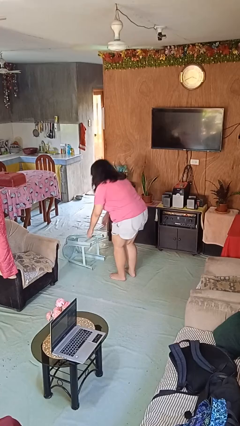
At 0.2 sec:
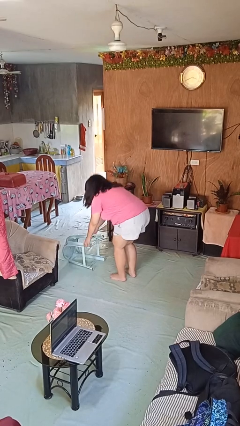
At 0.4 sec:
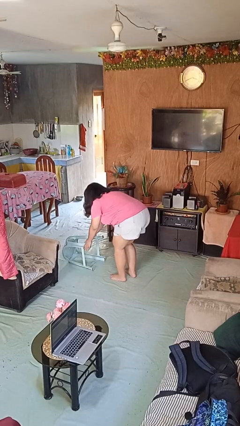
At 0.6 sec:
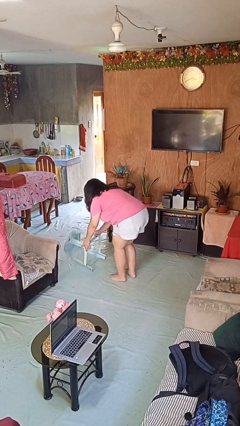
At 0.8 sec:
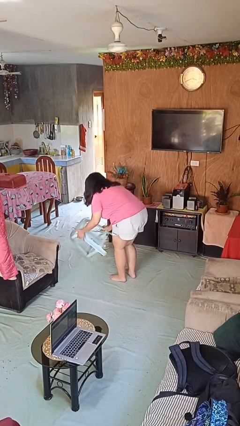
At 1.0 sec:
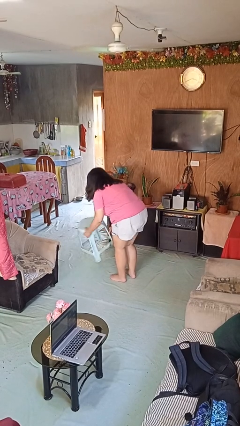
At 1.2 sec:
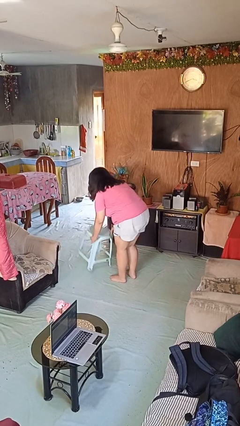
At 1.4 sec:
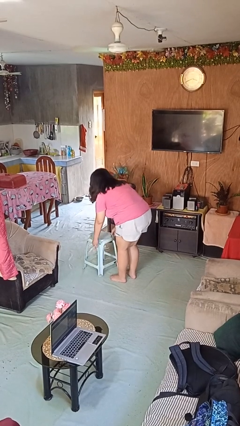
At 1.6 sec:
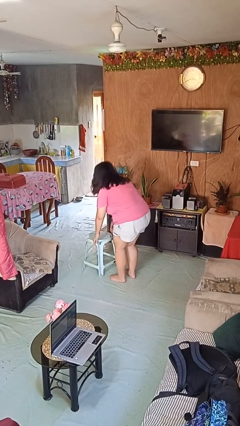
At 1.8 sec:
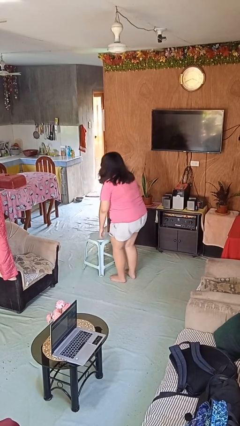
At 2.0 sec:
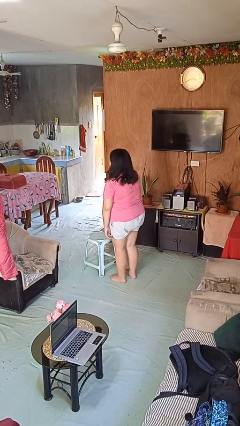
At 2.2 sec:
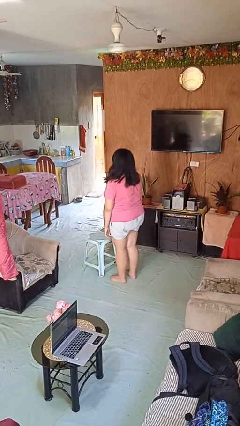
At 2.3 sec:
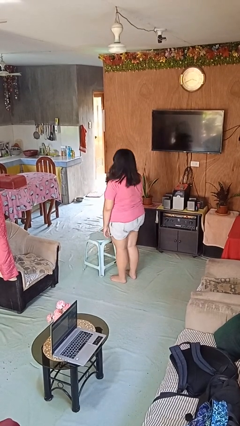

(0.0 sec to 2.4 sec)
person sets upright furniture

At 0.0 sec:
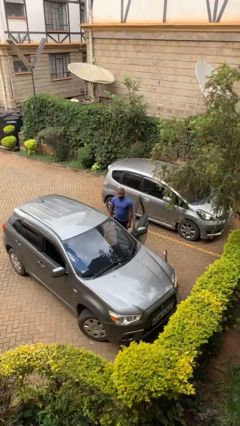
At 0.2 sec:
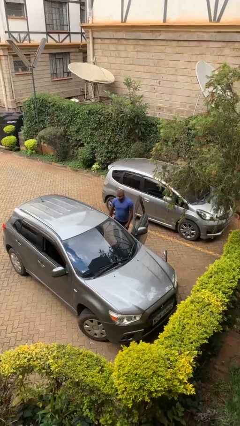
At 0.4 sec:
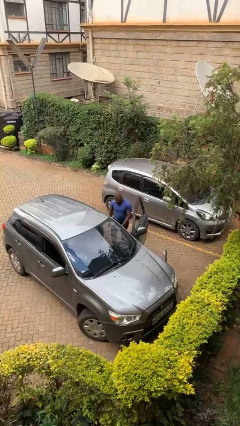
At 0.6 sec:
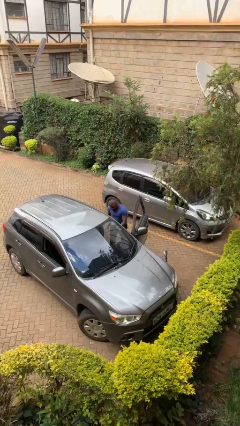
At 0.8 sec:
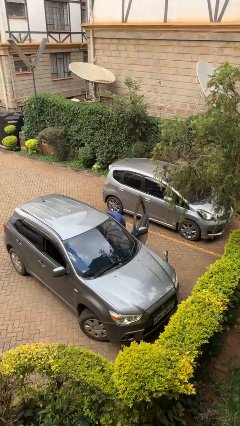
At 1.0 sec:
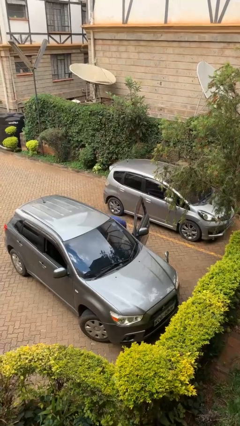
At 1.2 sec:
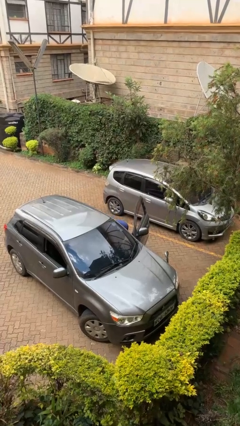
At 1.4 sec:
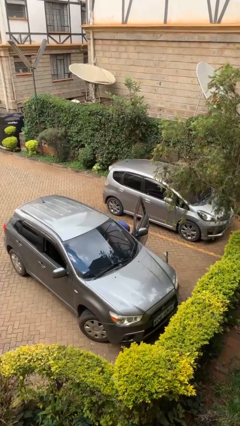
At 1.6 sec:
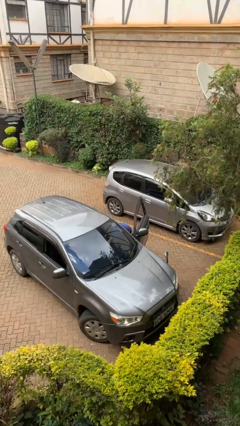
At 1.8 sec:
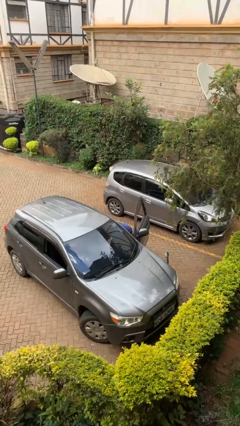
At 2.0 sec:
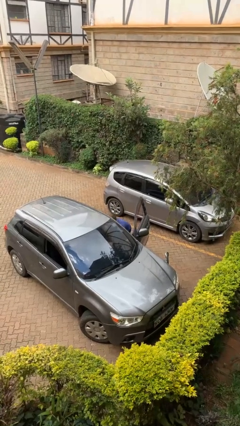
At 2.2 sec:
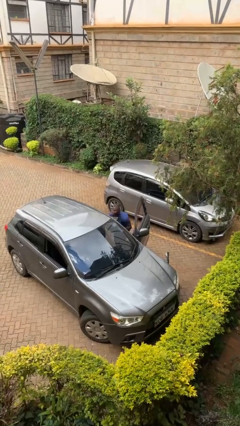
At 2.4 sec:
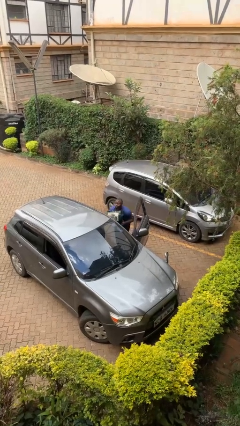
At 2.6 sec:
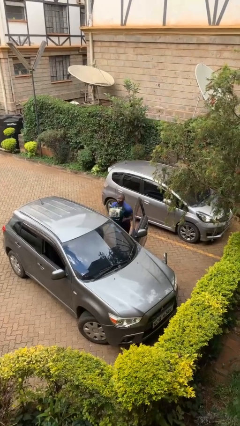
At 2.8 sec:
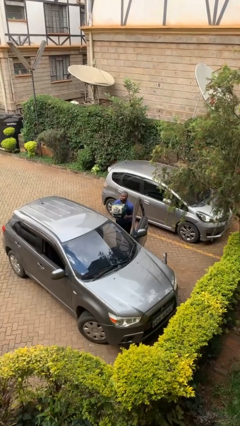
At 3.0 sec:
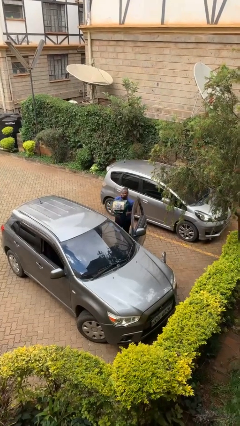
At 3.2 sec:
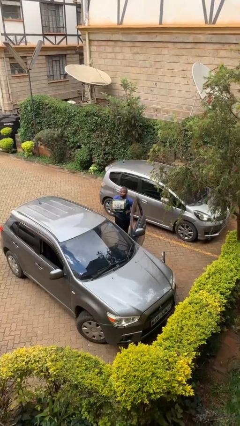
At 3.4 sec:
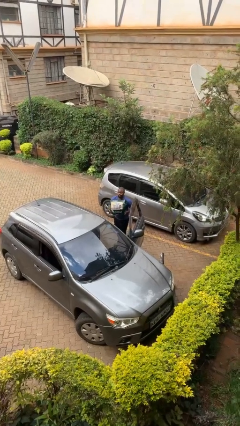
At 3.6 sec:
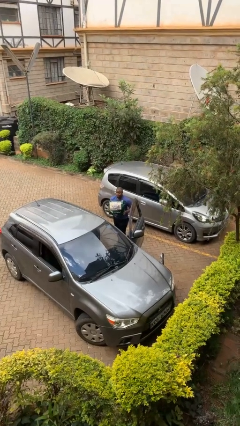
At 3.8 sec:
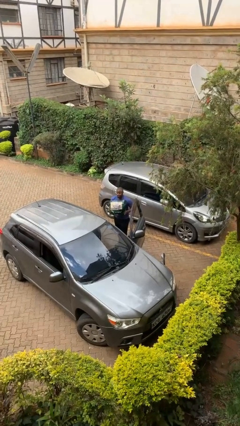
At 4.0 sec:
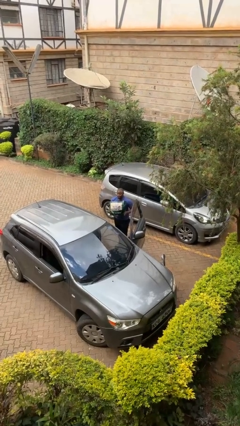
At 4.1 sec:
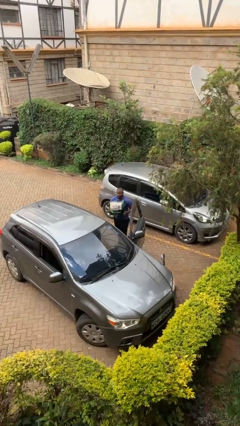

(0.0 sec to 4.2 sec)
person unloads car

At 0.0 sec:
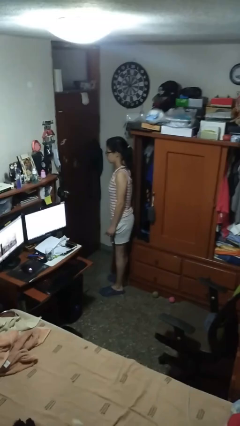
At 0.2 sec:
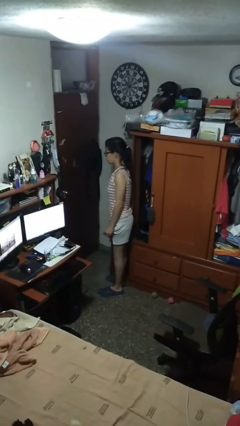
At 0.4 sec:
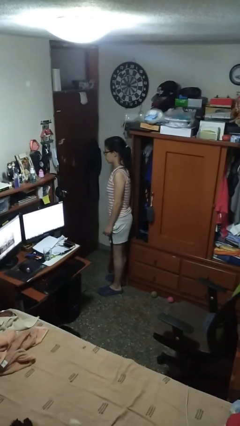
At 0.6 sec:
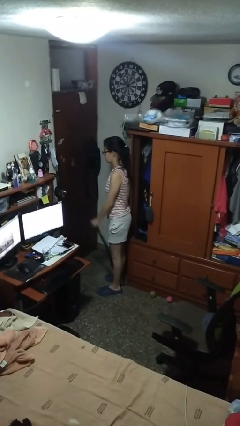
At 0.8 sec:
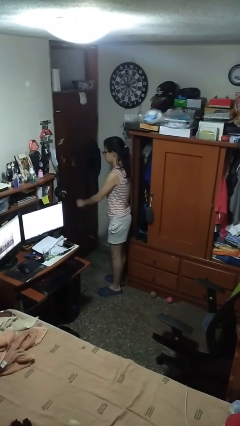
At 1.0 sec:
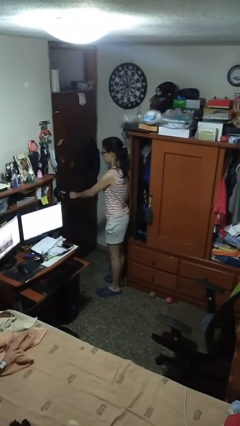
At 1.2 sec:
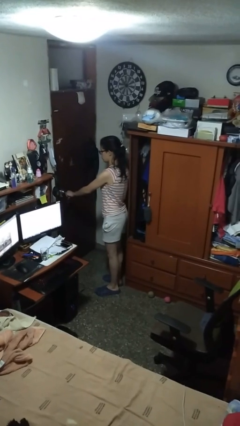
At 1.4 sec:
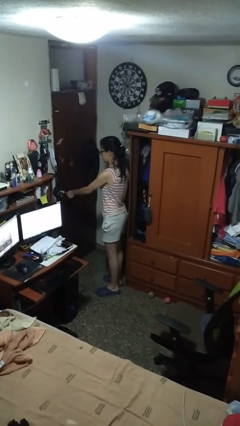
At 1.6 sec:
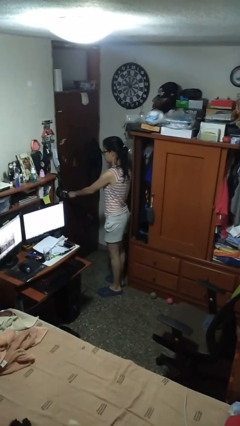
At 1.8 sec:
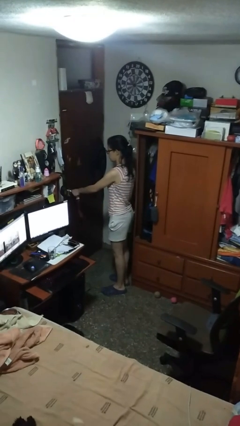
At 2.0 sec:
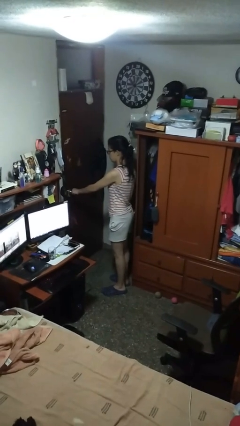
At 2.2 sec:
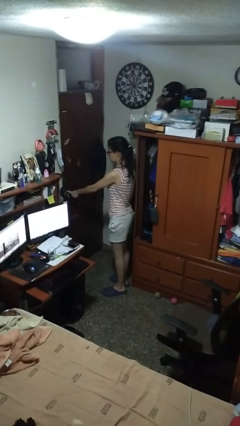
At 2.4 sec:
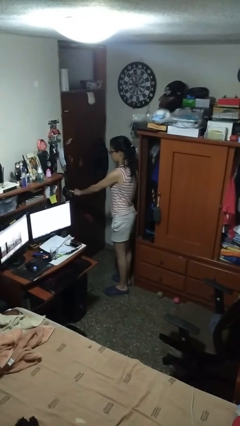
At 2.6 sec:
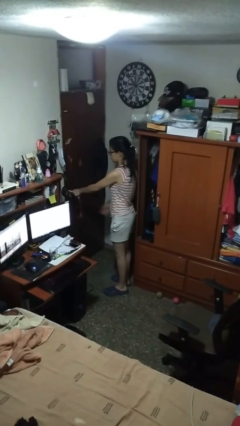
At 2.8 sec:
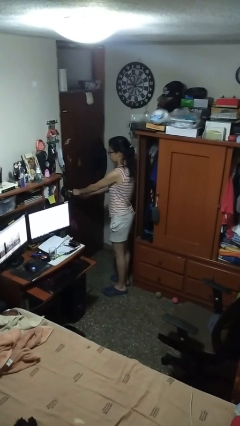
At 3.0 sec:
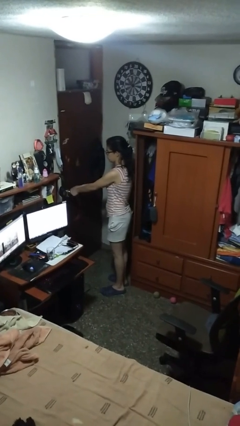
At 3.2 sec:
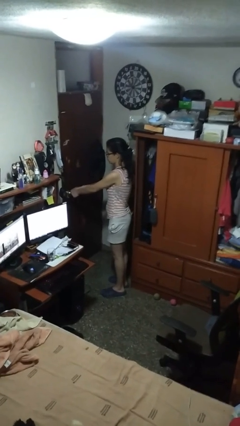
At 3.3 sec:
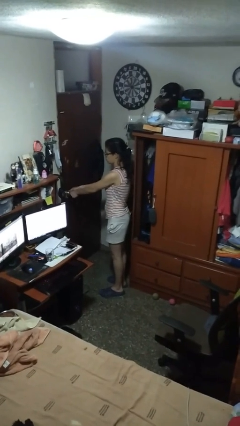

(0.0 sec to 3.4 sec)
person unlocks door with keys

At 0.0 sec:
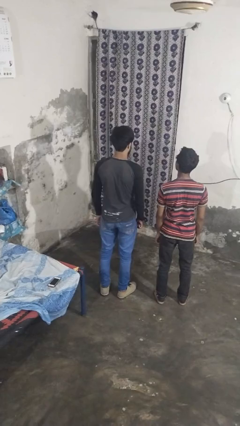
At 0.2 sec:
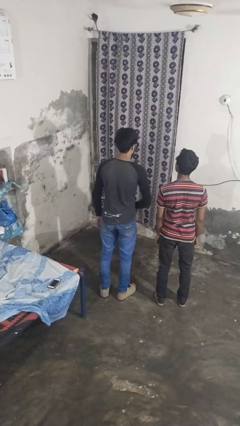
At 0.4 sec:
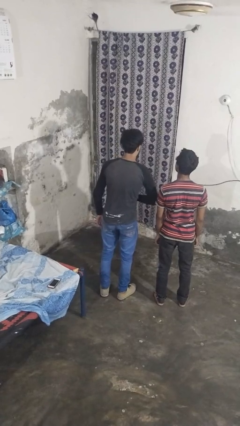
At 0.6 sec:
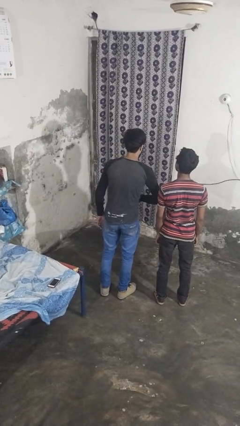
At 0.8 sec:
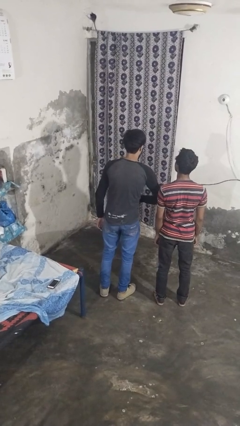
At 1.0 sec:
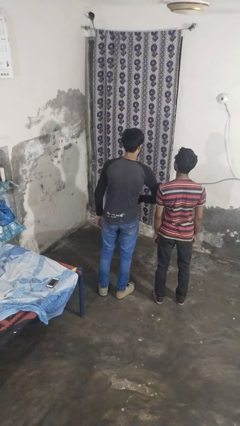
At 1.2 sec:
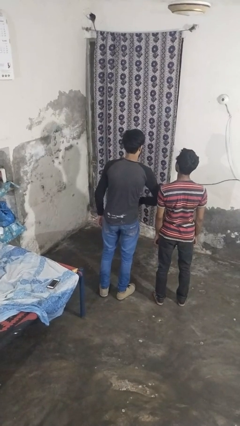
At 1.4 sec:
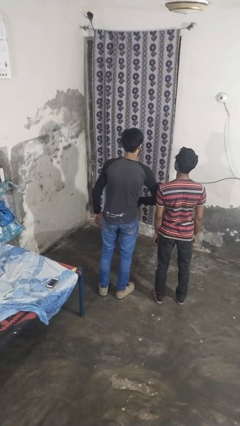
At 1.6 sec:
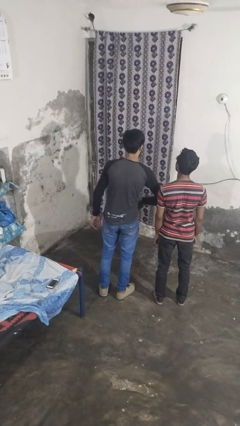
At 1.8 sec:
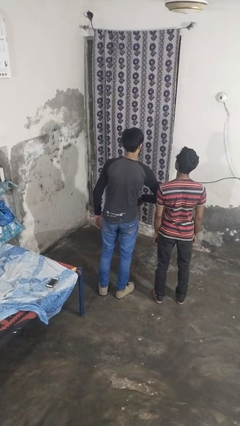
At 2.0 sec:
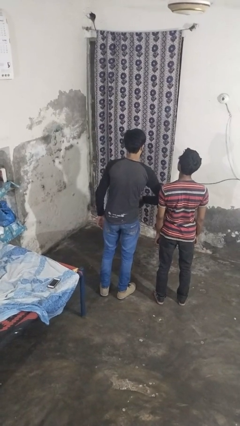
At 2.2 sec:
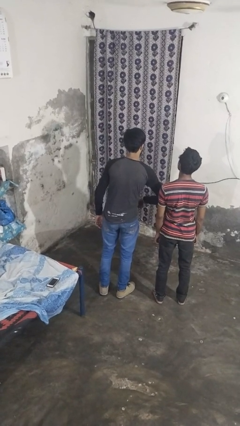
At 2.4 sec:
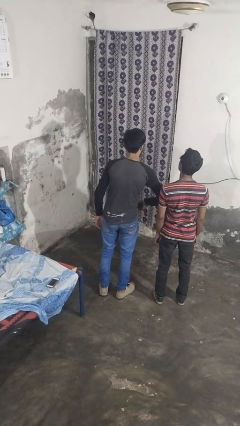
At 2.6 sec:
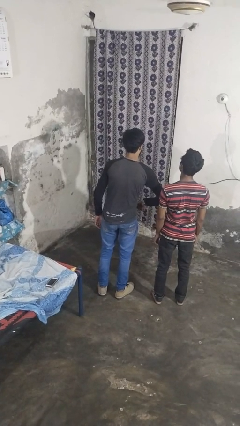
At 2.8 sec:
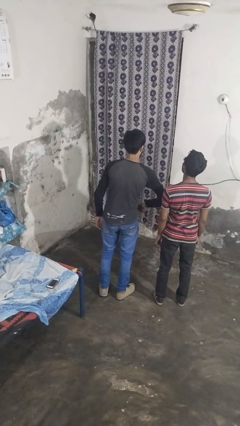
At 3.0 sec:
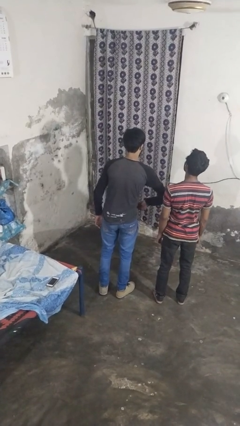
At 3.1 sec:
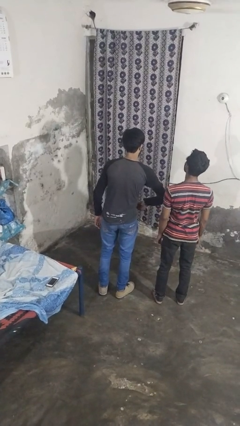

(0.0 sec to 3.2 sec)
person nudges person with elbow

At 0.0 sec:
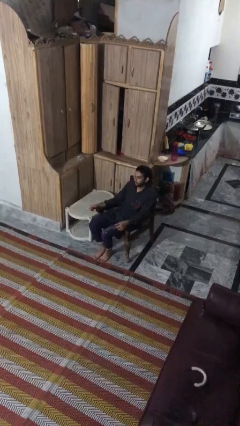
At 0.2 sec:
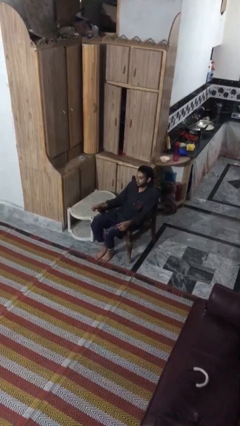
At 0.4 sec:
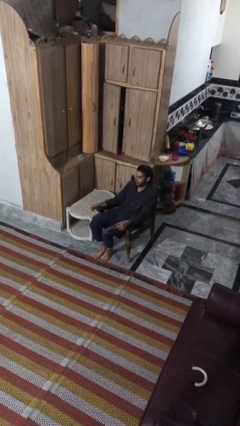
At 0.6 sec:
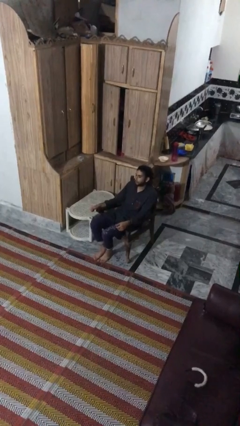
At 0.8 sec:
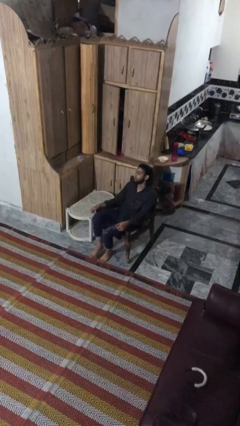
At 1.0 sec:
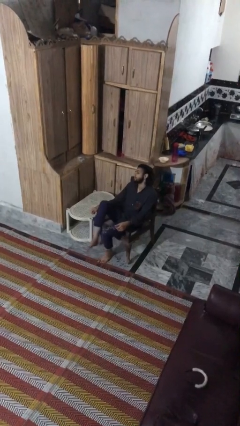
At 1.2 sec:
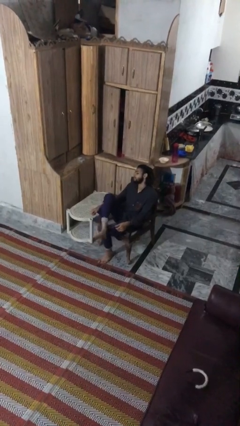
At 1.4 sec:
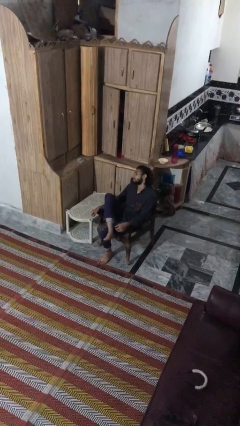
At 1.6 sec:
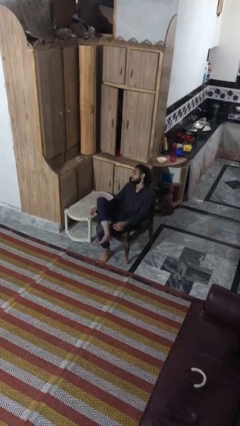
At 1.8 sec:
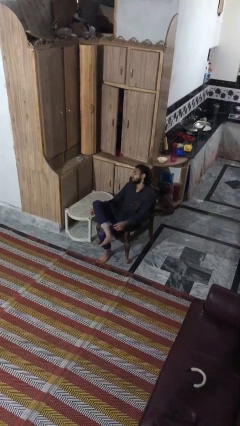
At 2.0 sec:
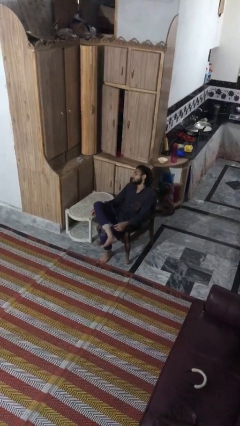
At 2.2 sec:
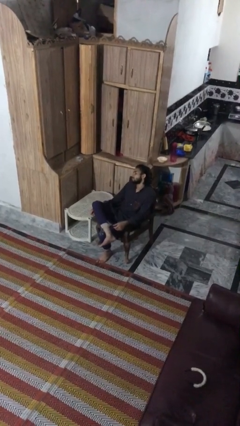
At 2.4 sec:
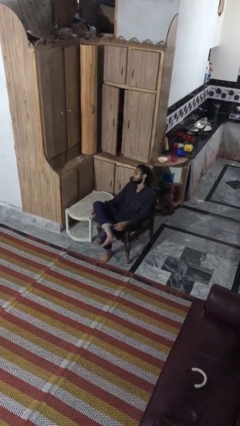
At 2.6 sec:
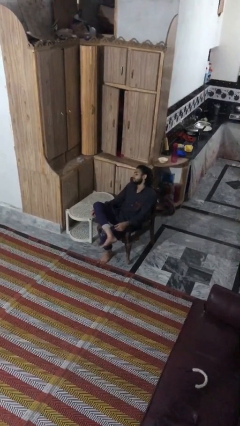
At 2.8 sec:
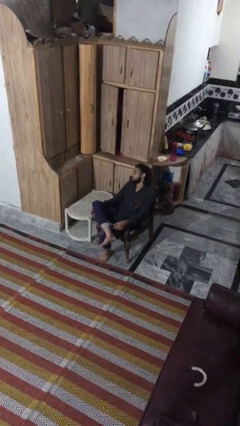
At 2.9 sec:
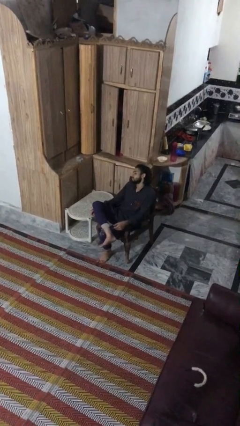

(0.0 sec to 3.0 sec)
person crosses legs

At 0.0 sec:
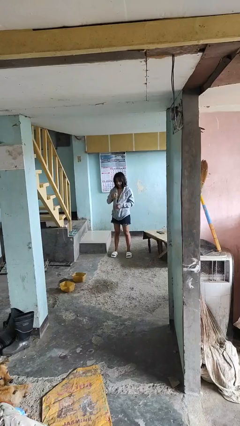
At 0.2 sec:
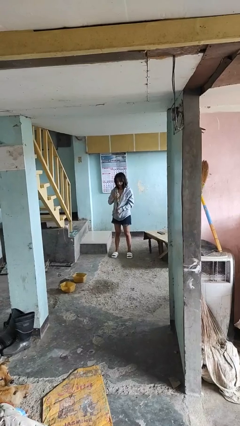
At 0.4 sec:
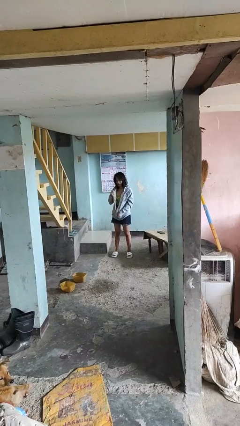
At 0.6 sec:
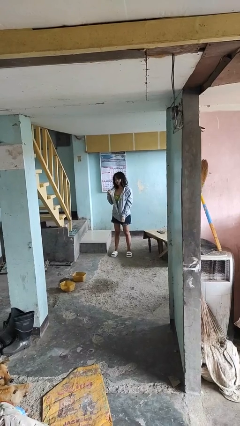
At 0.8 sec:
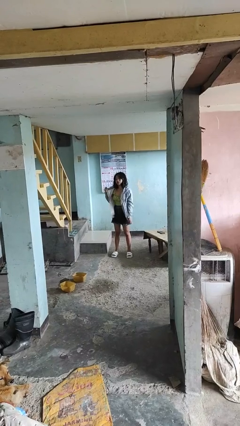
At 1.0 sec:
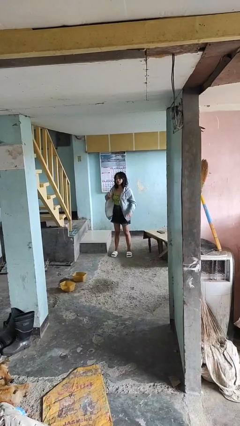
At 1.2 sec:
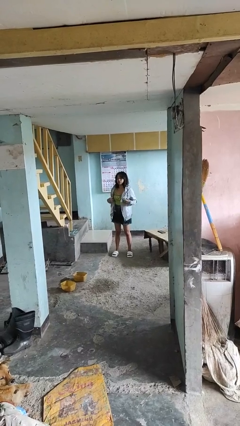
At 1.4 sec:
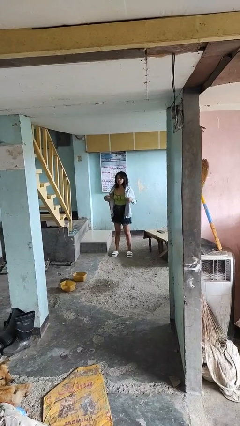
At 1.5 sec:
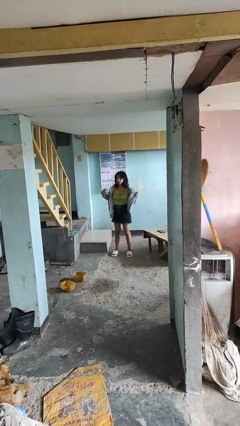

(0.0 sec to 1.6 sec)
person unzips jacket
